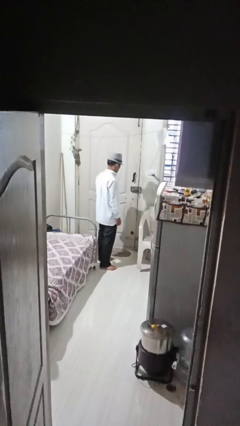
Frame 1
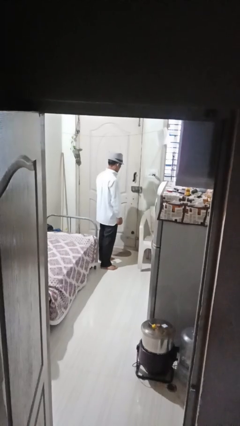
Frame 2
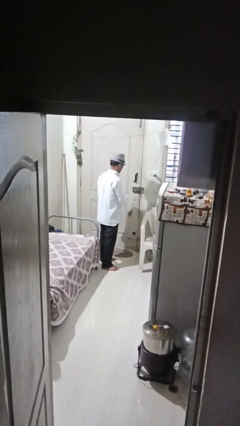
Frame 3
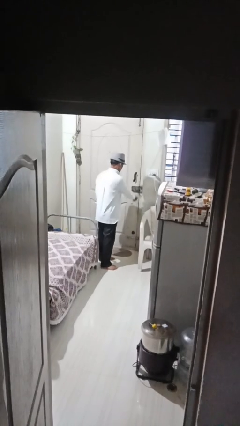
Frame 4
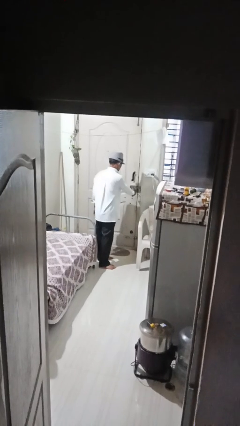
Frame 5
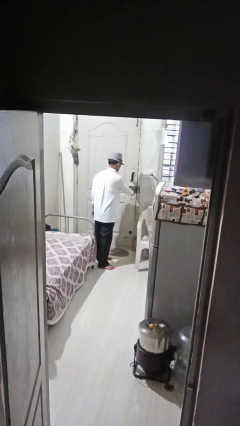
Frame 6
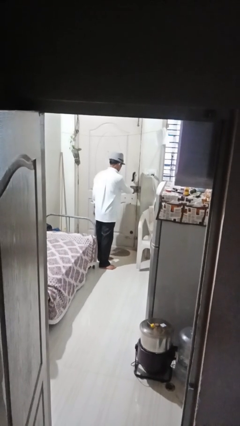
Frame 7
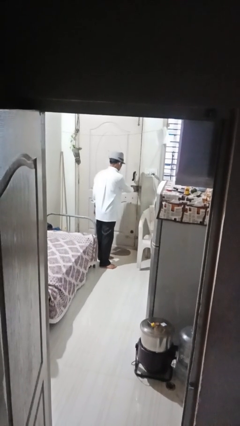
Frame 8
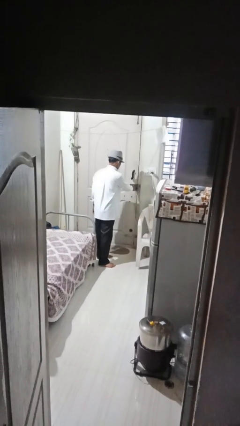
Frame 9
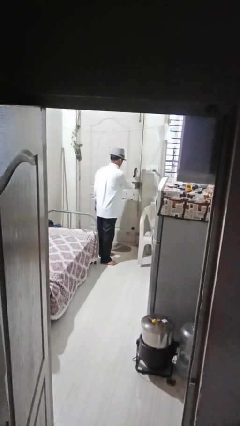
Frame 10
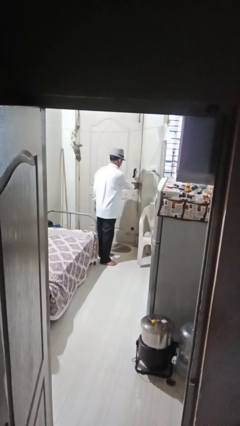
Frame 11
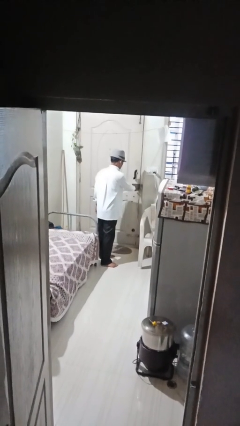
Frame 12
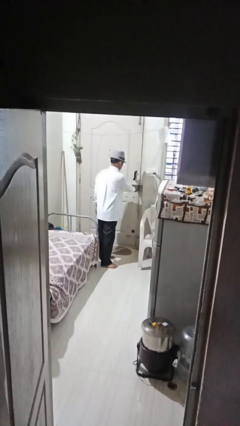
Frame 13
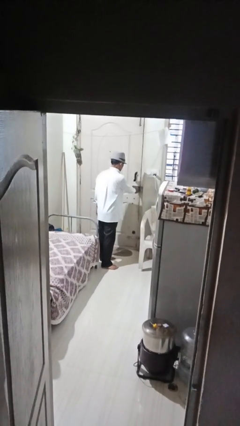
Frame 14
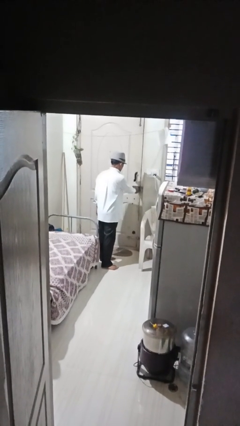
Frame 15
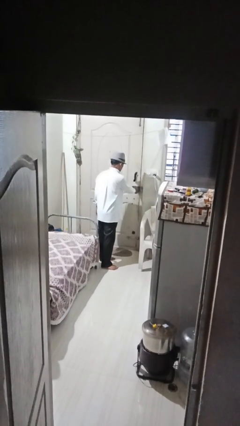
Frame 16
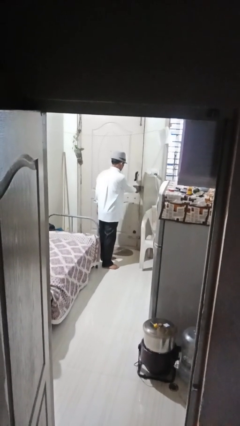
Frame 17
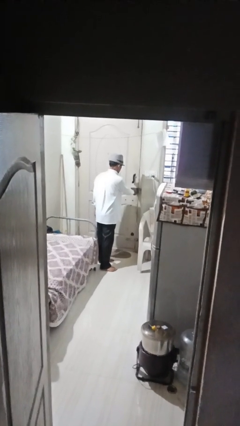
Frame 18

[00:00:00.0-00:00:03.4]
person unlocks door with keys

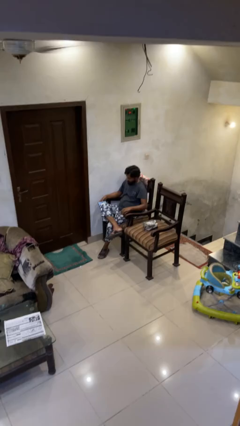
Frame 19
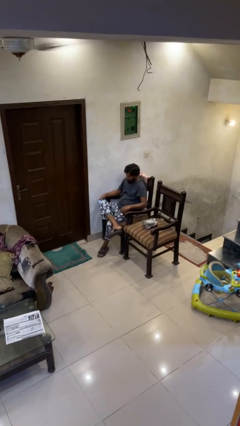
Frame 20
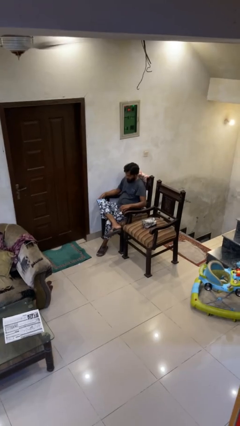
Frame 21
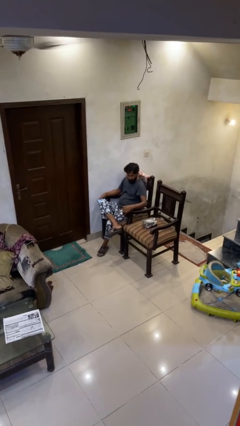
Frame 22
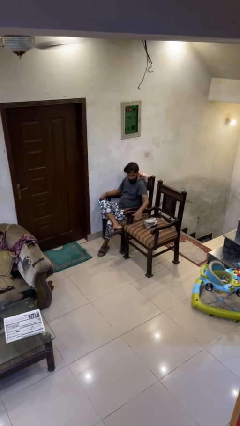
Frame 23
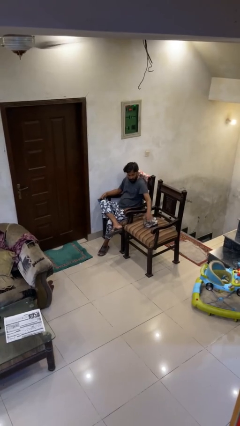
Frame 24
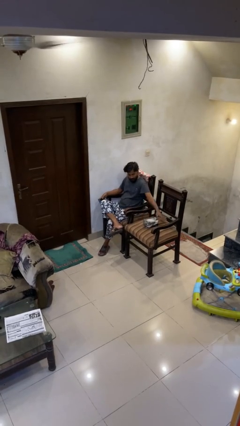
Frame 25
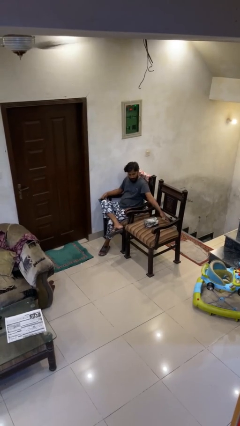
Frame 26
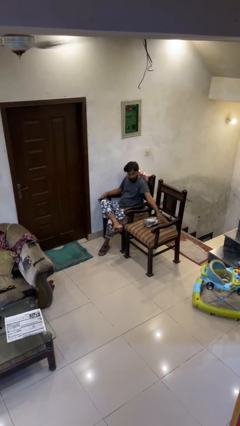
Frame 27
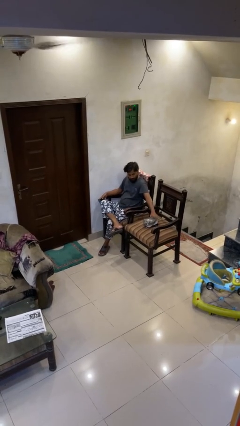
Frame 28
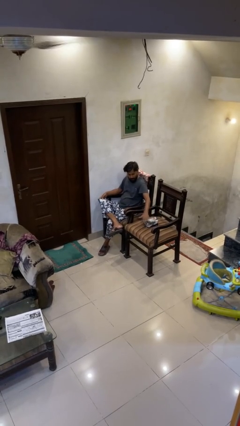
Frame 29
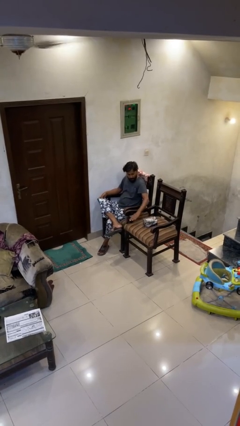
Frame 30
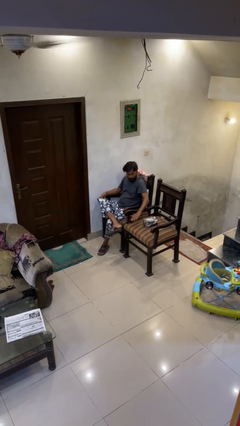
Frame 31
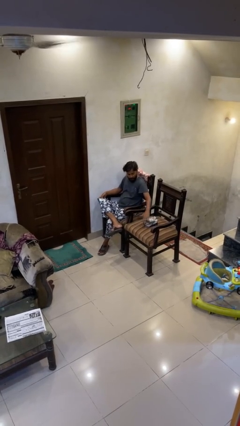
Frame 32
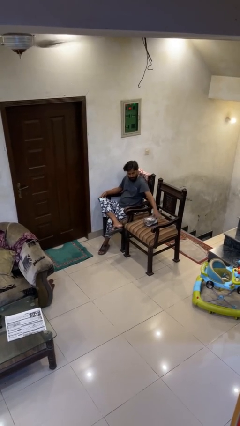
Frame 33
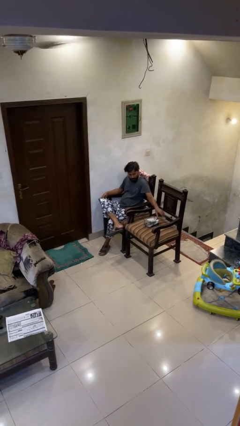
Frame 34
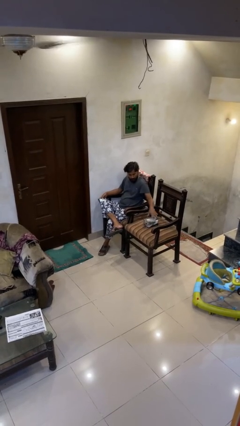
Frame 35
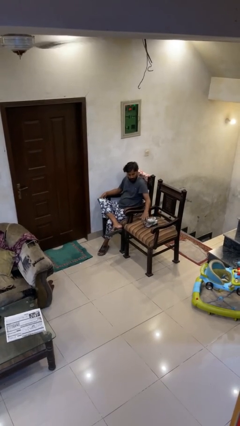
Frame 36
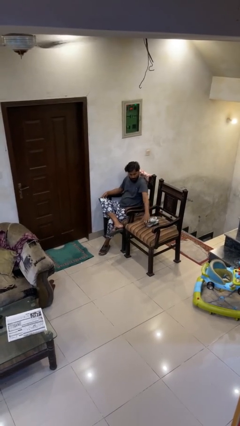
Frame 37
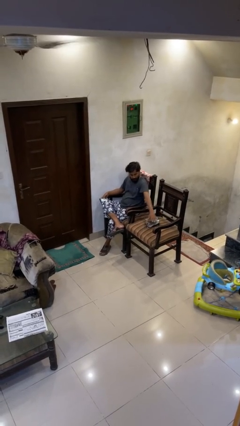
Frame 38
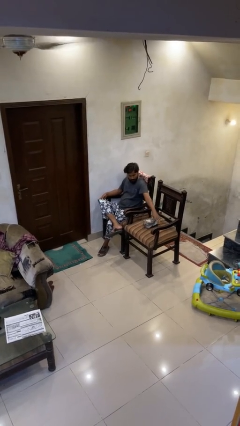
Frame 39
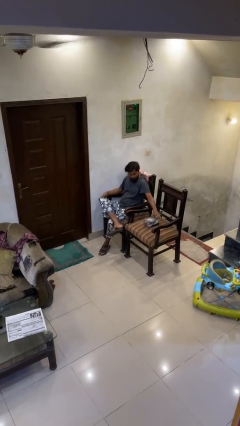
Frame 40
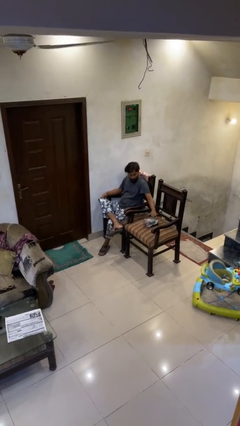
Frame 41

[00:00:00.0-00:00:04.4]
person waves hand over object

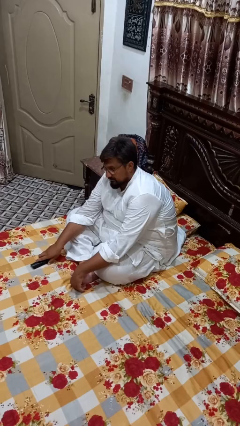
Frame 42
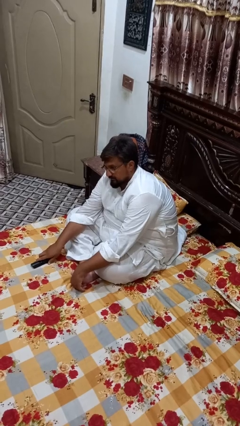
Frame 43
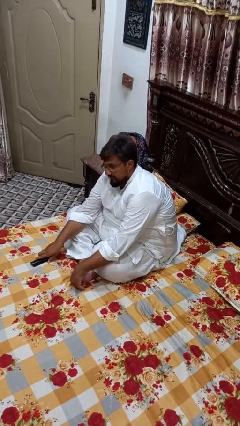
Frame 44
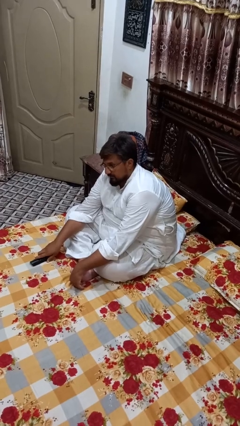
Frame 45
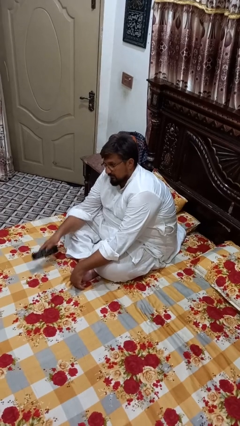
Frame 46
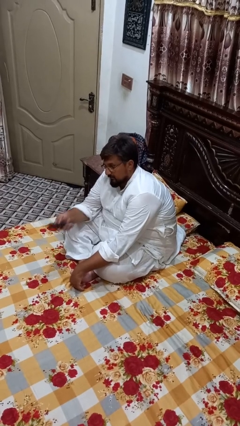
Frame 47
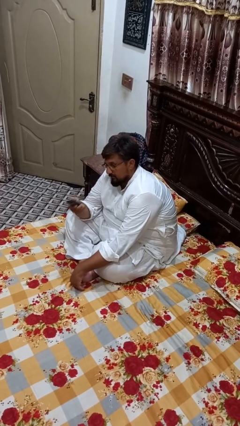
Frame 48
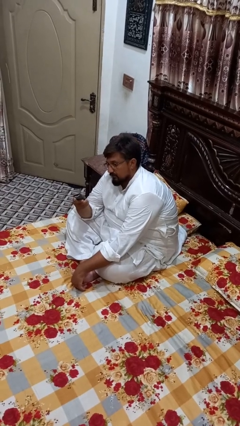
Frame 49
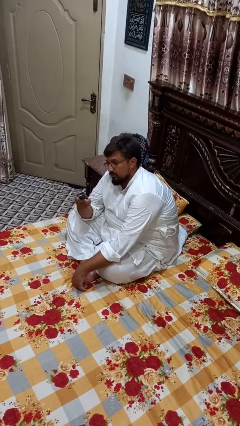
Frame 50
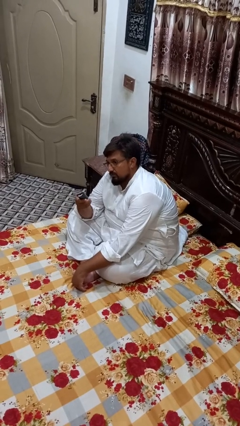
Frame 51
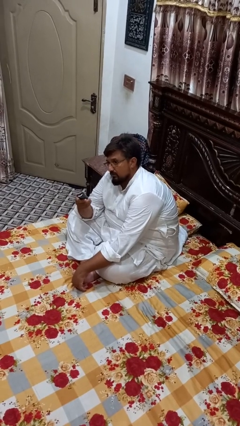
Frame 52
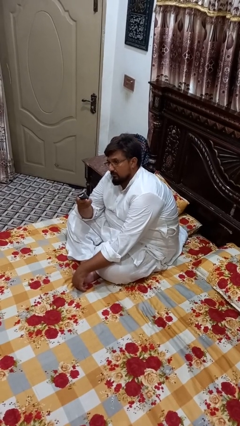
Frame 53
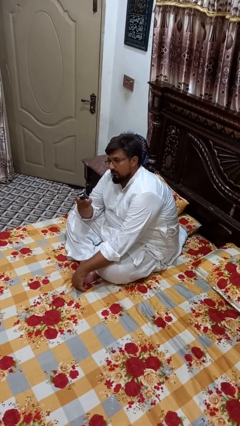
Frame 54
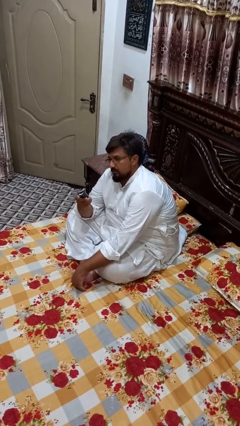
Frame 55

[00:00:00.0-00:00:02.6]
person uses television remote

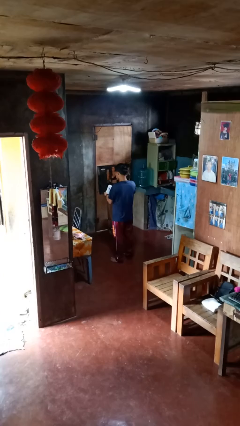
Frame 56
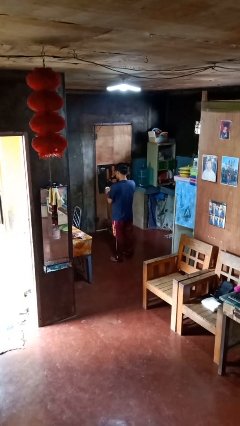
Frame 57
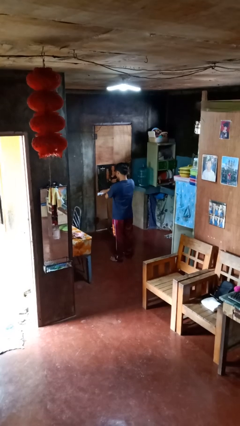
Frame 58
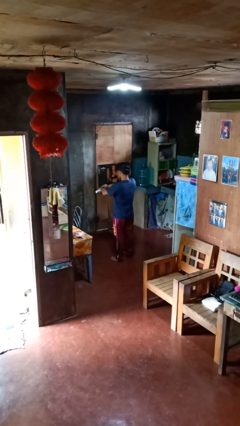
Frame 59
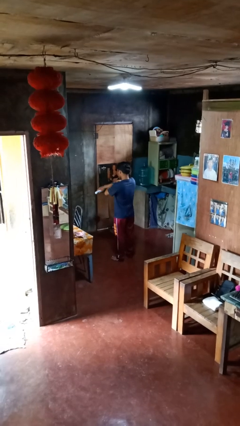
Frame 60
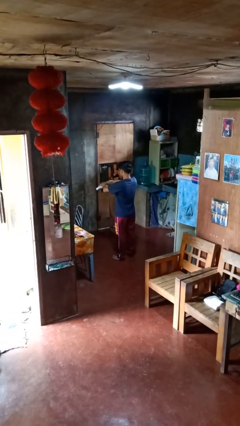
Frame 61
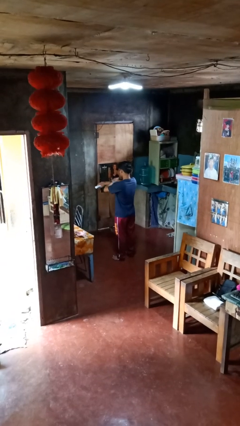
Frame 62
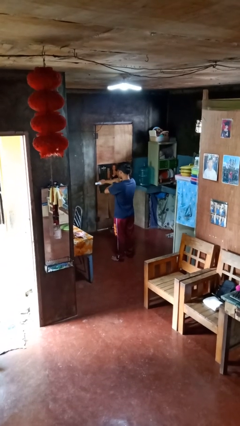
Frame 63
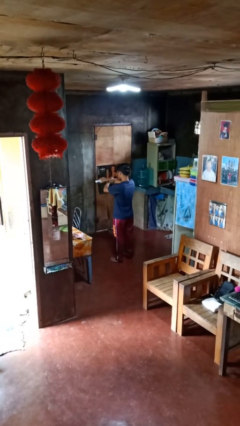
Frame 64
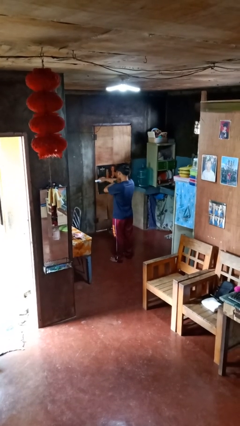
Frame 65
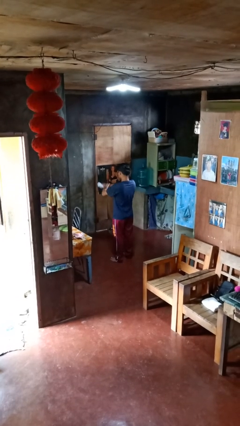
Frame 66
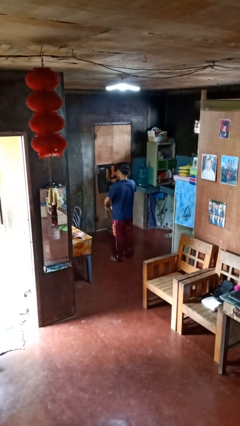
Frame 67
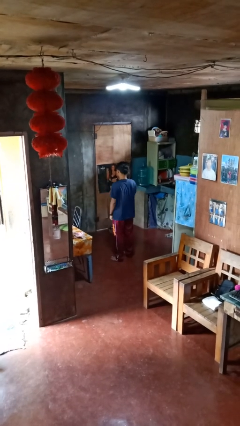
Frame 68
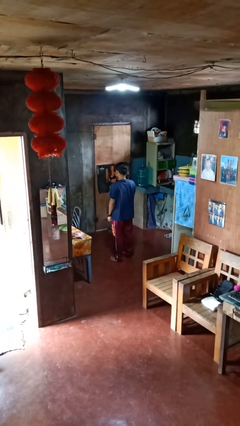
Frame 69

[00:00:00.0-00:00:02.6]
person applies sunscreen

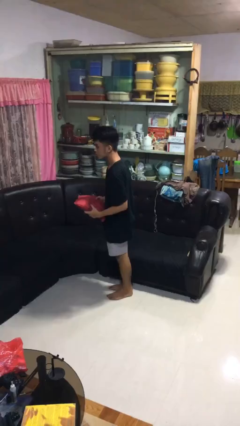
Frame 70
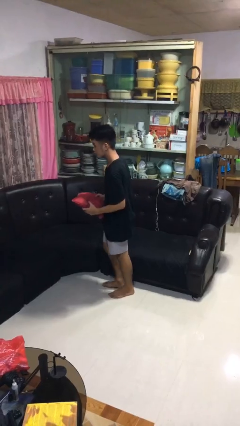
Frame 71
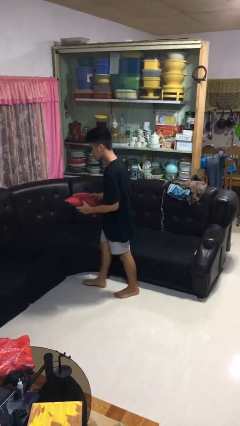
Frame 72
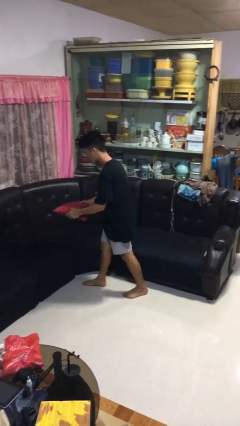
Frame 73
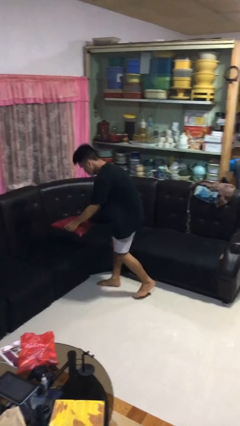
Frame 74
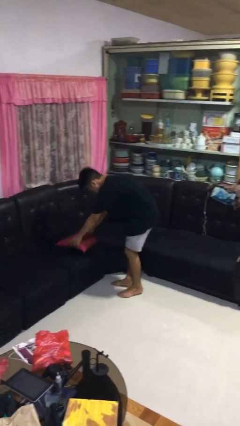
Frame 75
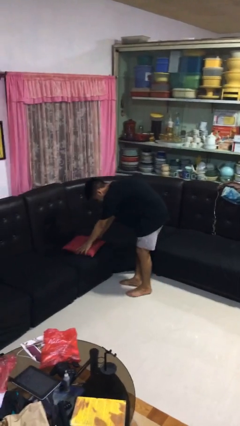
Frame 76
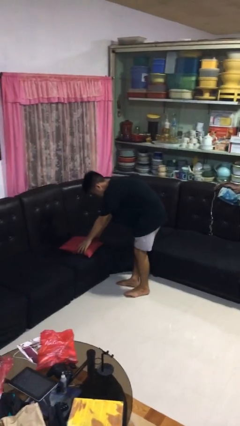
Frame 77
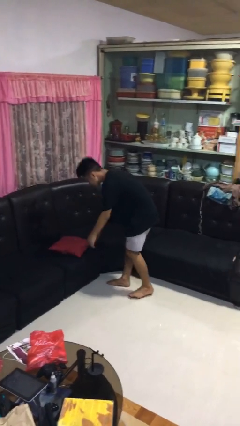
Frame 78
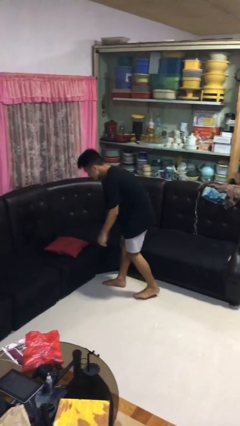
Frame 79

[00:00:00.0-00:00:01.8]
person puts down object on couch

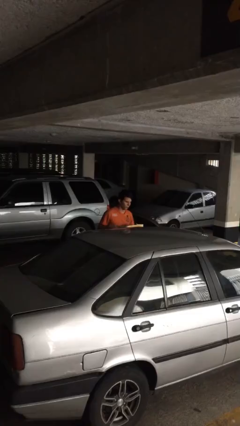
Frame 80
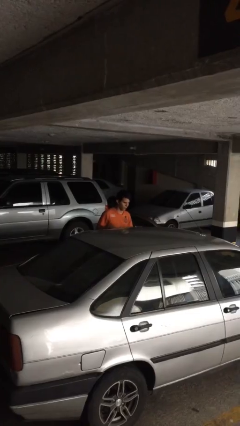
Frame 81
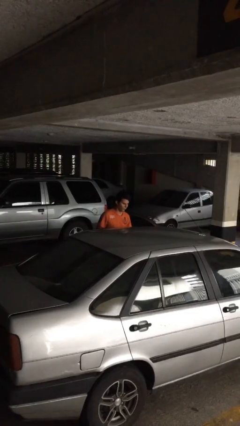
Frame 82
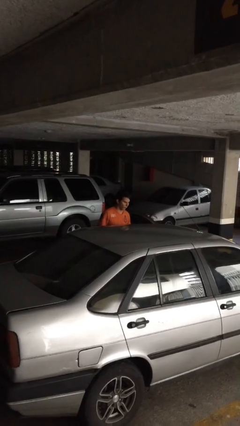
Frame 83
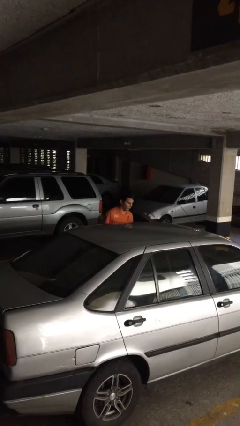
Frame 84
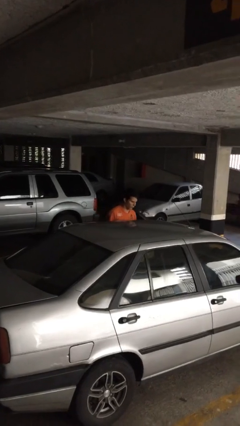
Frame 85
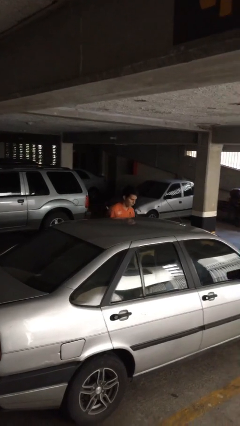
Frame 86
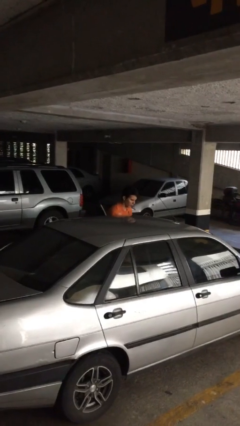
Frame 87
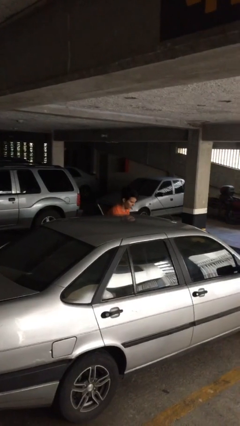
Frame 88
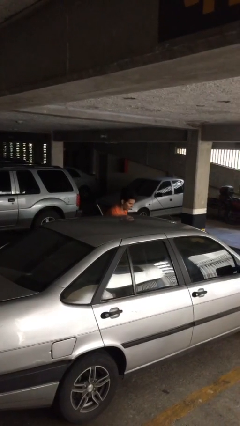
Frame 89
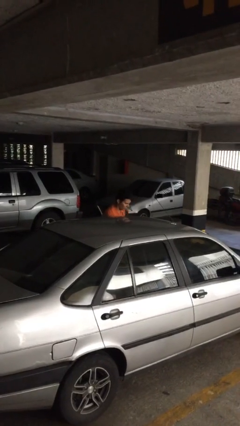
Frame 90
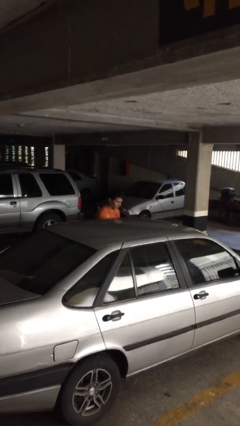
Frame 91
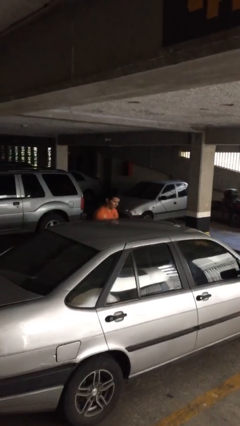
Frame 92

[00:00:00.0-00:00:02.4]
person loads car
